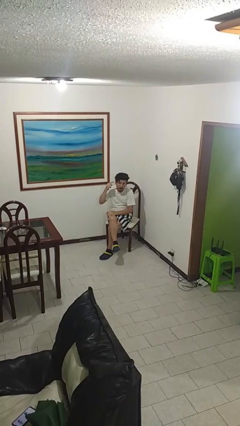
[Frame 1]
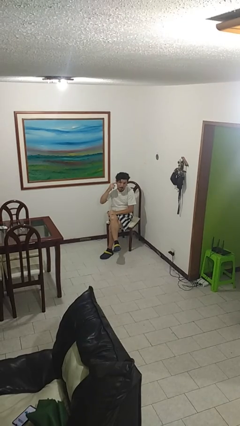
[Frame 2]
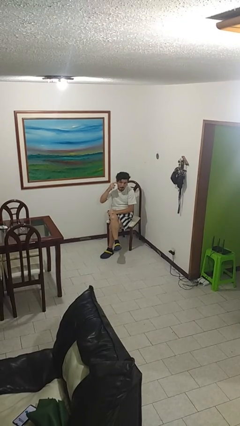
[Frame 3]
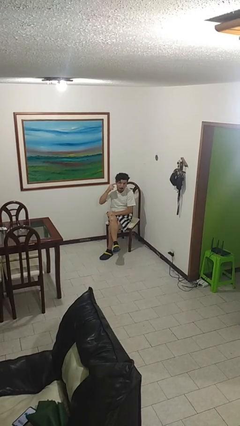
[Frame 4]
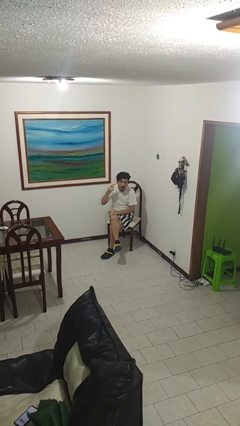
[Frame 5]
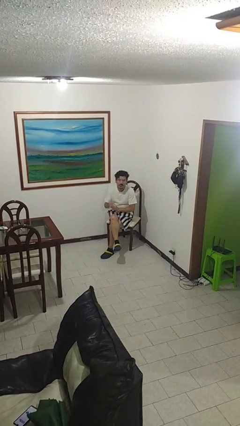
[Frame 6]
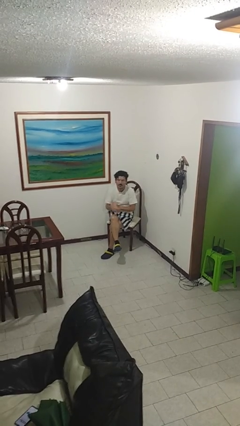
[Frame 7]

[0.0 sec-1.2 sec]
person gestures listen closely

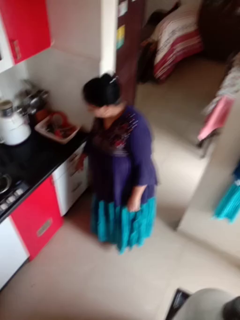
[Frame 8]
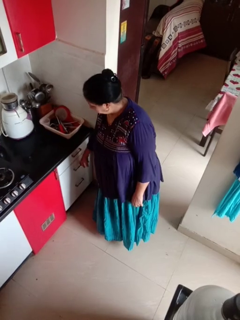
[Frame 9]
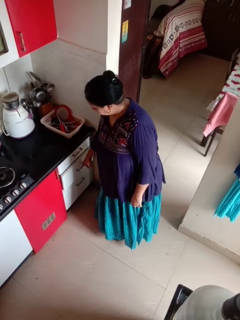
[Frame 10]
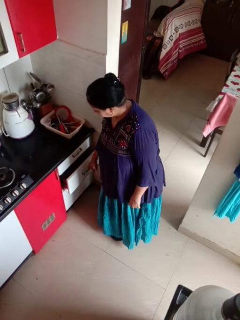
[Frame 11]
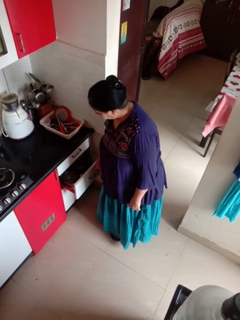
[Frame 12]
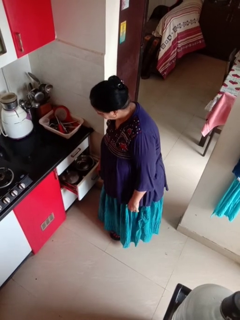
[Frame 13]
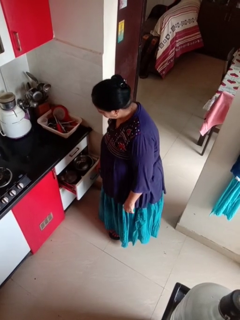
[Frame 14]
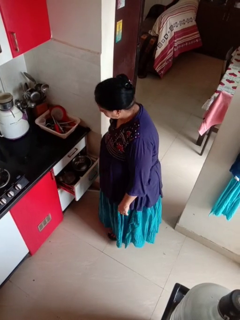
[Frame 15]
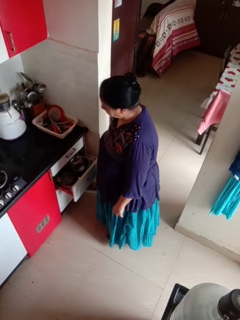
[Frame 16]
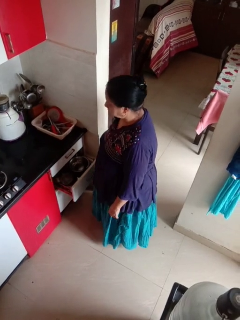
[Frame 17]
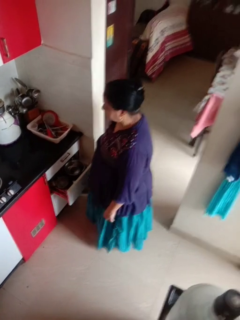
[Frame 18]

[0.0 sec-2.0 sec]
person opens kitchen drawer

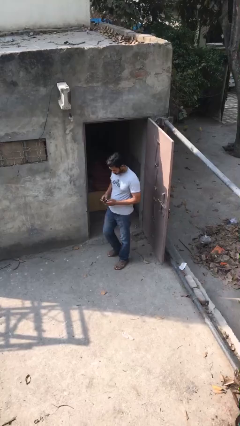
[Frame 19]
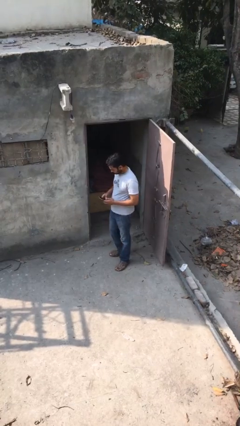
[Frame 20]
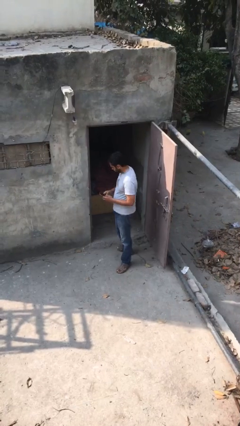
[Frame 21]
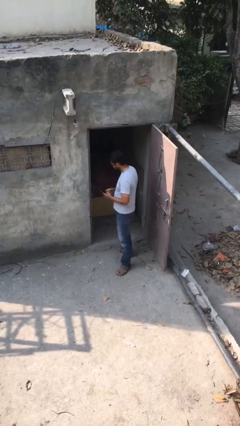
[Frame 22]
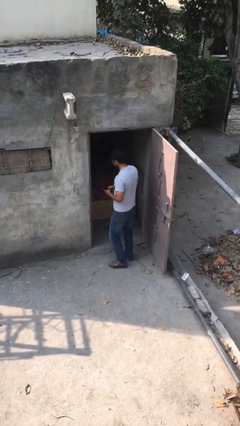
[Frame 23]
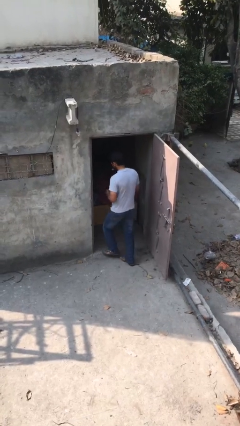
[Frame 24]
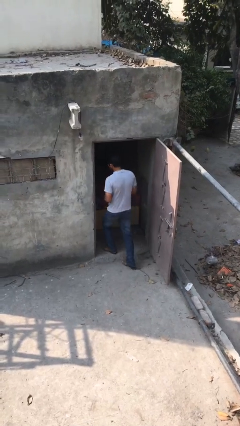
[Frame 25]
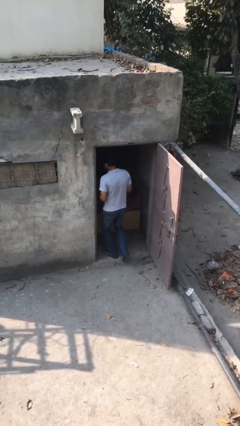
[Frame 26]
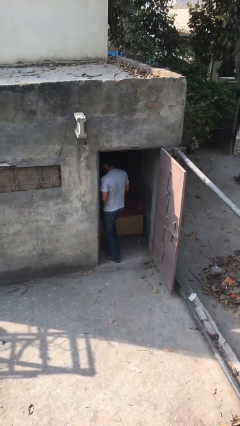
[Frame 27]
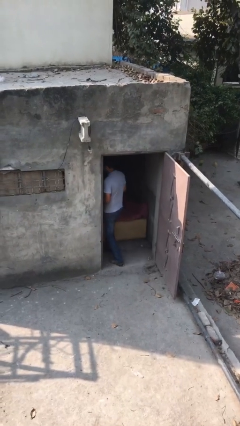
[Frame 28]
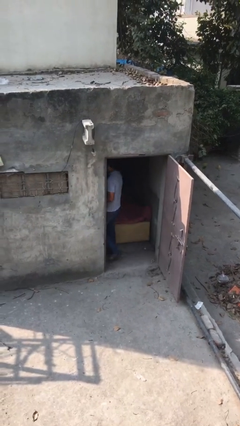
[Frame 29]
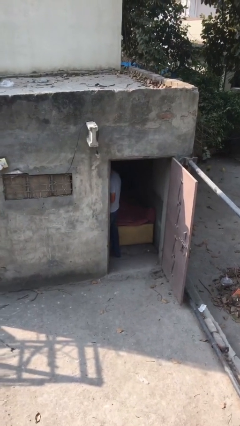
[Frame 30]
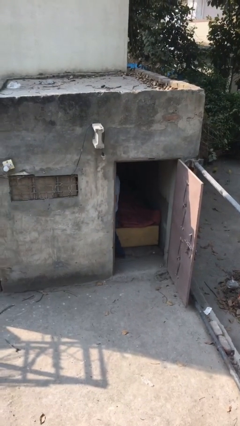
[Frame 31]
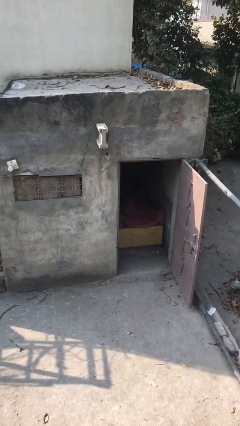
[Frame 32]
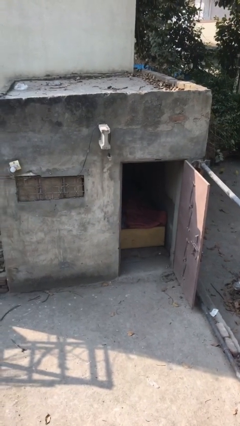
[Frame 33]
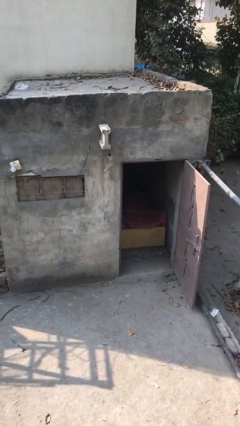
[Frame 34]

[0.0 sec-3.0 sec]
person exits scene through structure

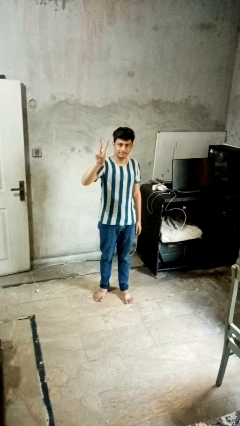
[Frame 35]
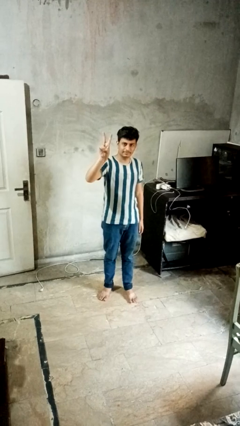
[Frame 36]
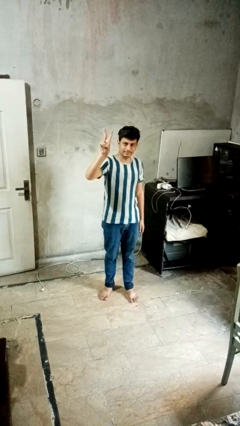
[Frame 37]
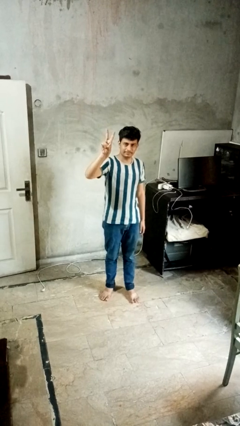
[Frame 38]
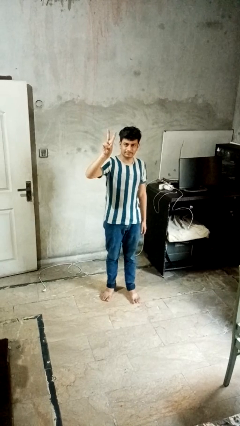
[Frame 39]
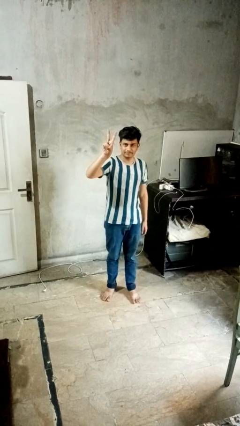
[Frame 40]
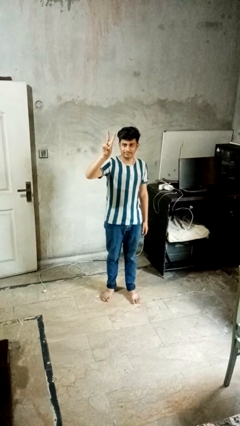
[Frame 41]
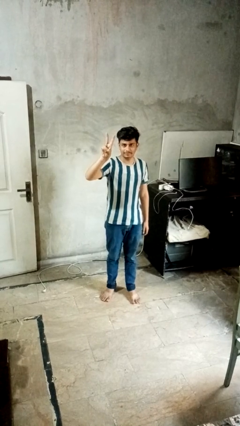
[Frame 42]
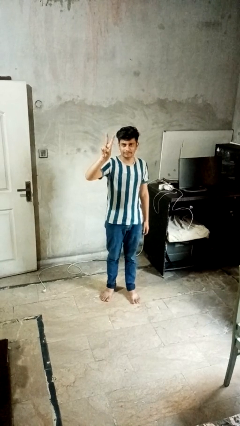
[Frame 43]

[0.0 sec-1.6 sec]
person gestures peace

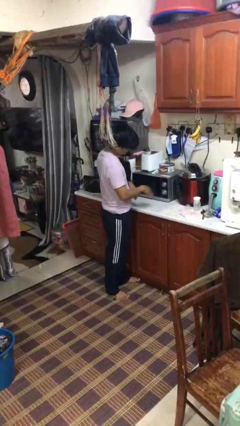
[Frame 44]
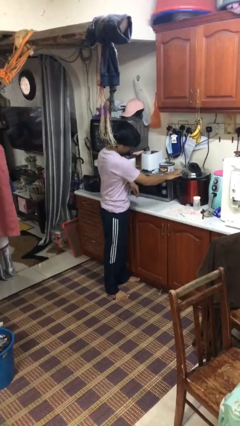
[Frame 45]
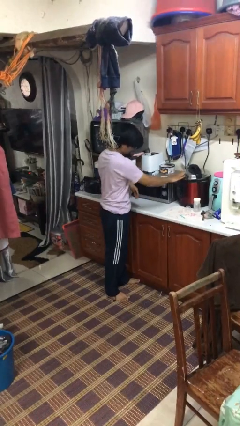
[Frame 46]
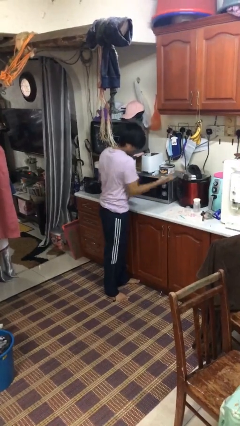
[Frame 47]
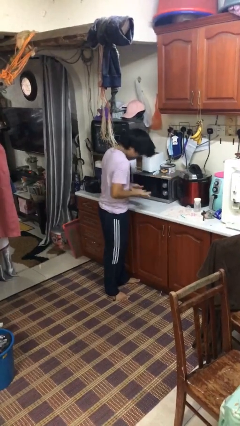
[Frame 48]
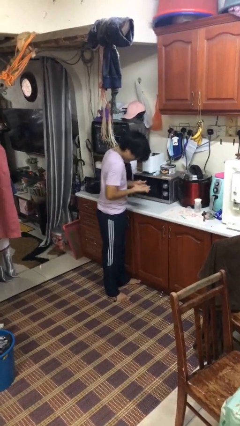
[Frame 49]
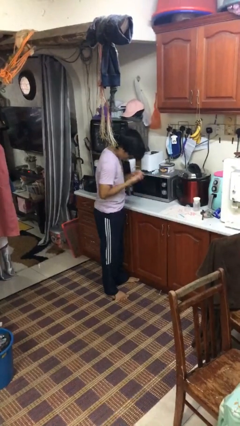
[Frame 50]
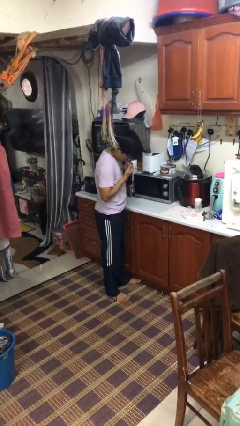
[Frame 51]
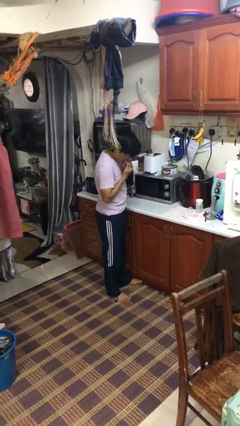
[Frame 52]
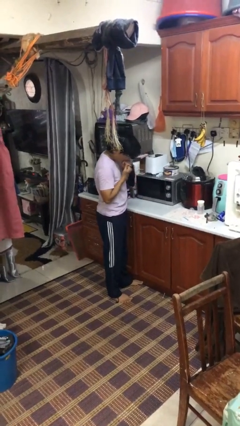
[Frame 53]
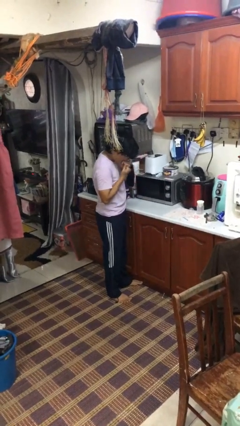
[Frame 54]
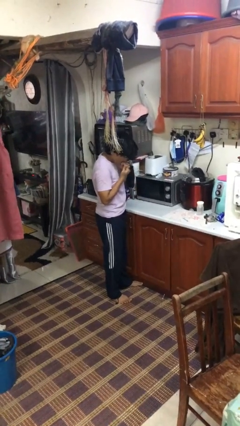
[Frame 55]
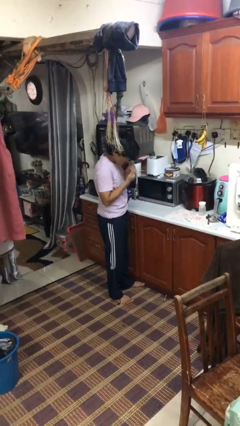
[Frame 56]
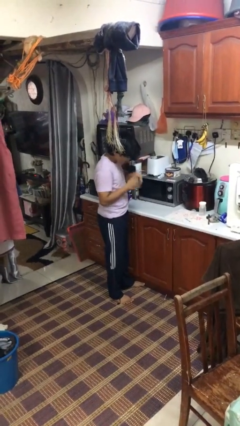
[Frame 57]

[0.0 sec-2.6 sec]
person burns hand

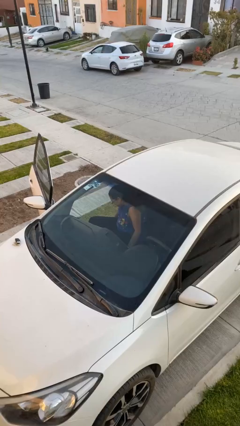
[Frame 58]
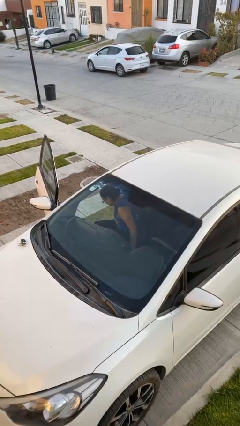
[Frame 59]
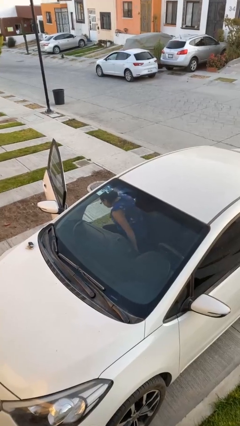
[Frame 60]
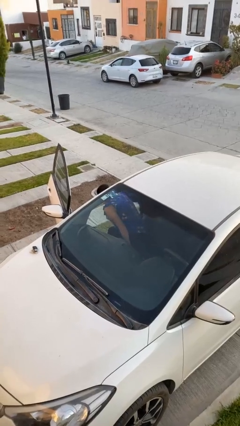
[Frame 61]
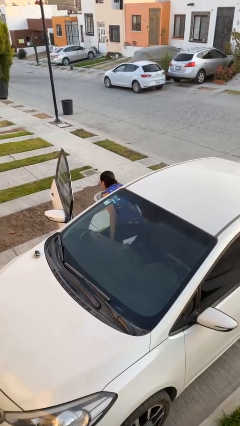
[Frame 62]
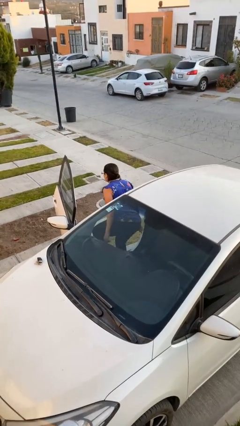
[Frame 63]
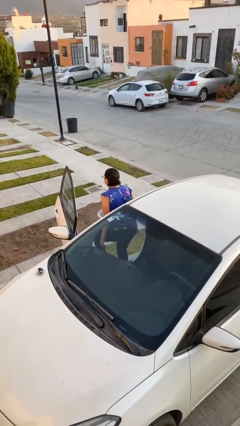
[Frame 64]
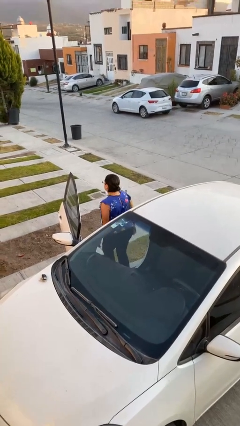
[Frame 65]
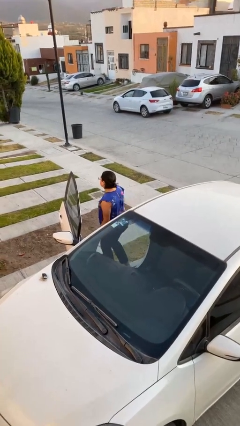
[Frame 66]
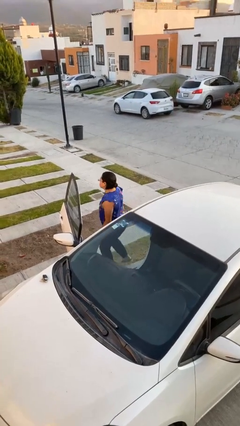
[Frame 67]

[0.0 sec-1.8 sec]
person exits car

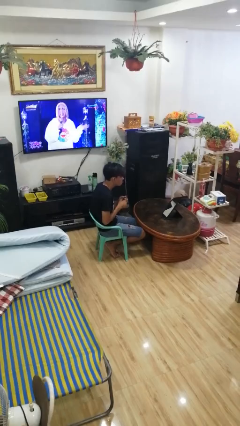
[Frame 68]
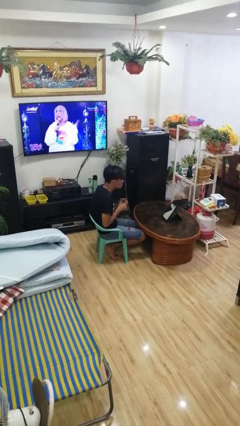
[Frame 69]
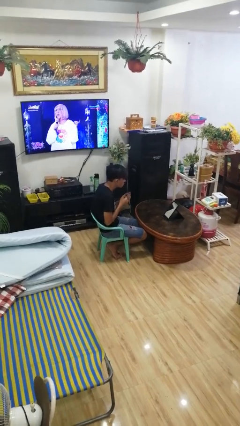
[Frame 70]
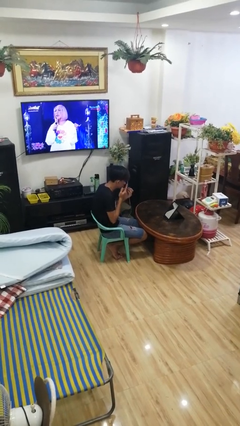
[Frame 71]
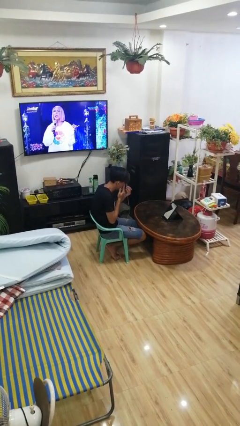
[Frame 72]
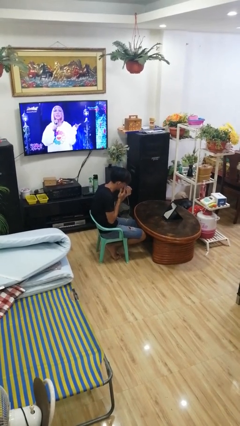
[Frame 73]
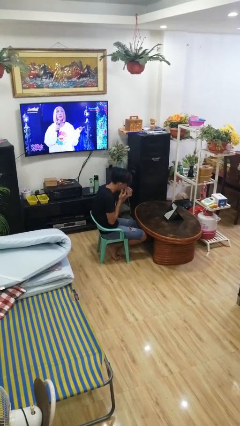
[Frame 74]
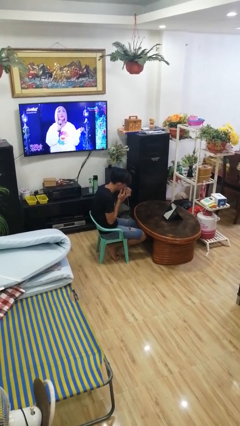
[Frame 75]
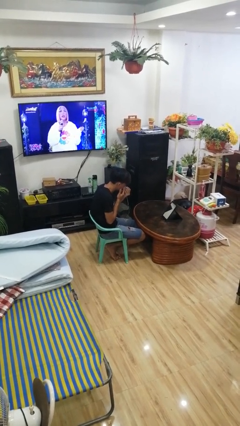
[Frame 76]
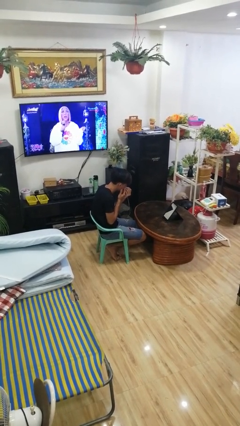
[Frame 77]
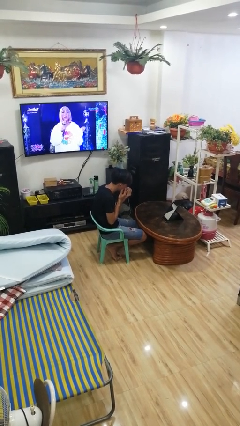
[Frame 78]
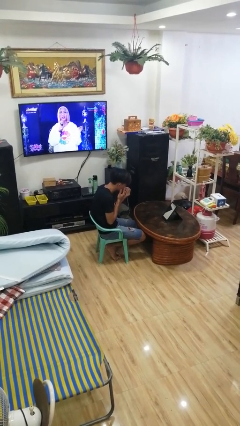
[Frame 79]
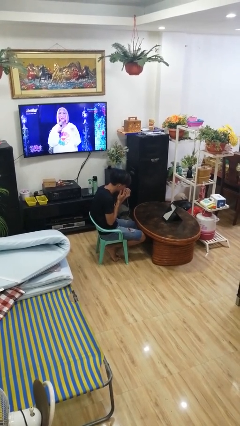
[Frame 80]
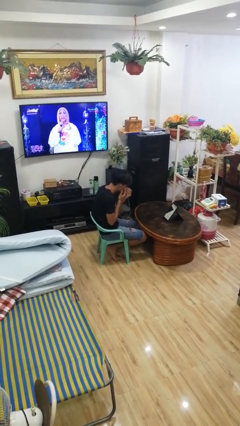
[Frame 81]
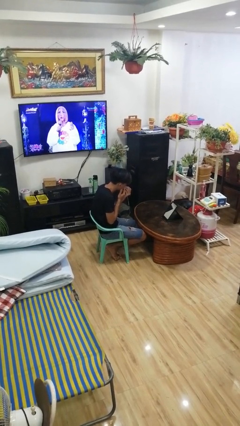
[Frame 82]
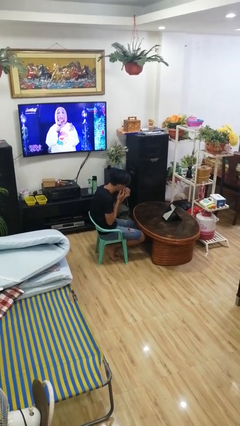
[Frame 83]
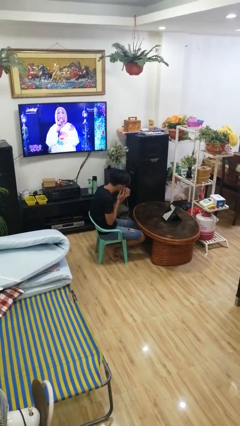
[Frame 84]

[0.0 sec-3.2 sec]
person applies eye makeup

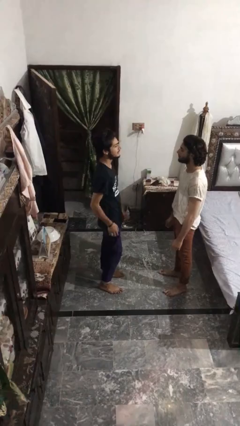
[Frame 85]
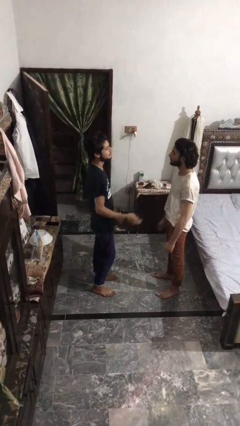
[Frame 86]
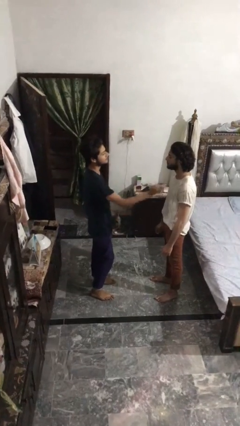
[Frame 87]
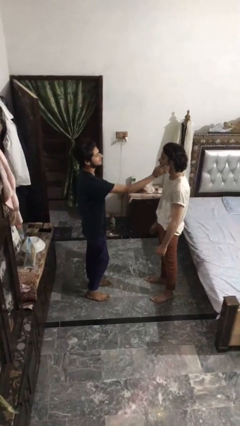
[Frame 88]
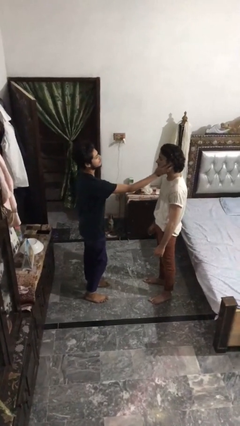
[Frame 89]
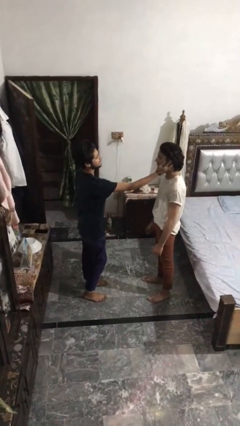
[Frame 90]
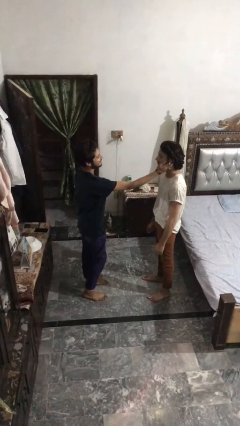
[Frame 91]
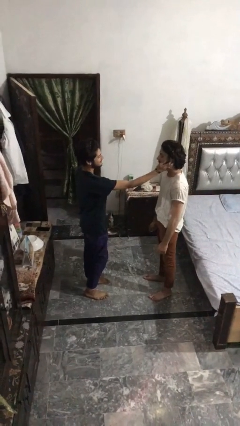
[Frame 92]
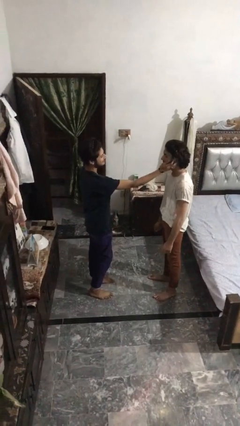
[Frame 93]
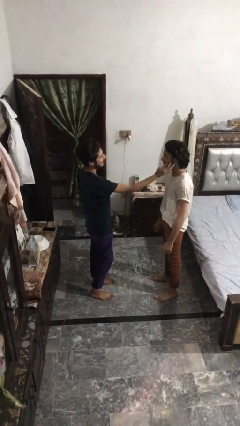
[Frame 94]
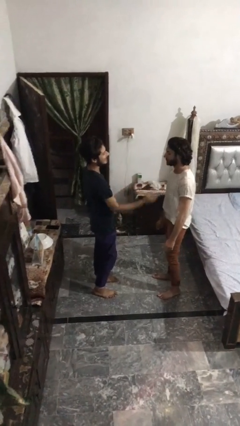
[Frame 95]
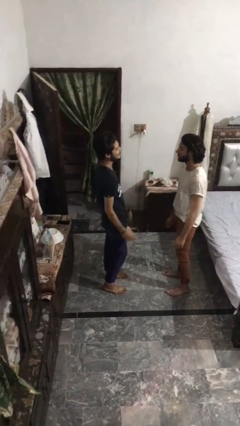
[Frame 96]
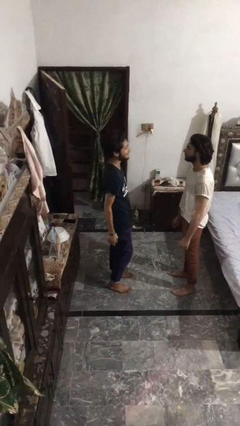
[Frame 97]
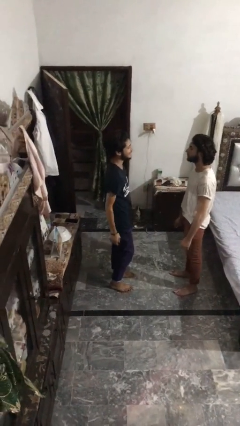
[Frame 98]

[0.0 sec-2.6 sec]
person touches face of person
